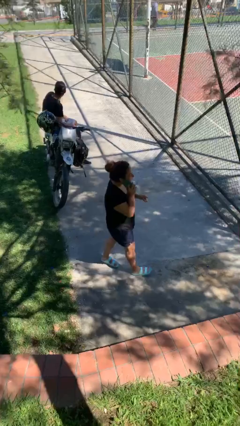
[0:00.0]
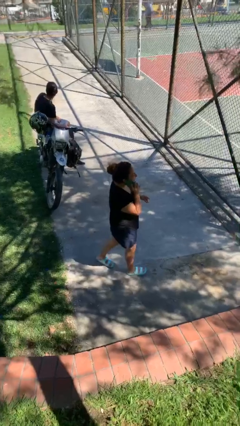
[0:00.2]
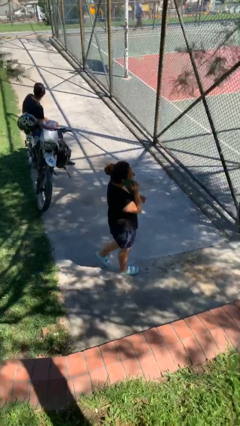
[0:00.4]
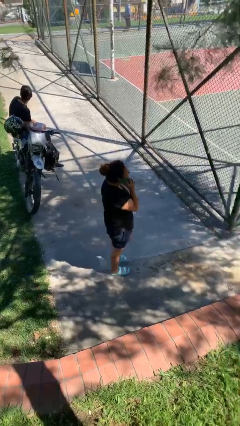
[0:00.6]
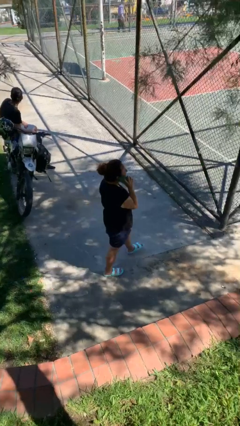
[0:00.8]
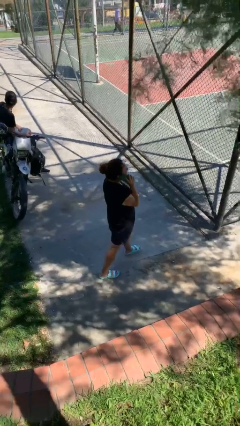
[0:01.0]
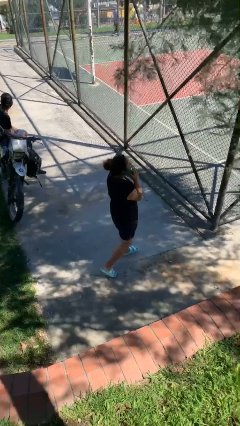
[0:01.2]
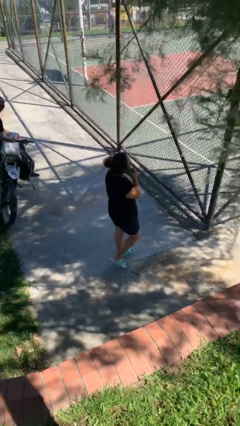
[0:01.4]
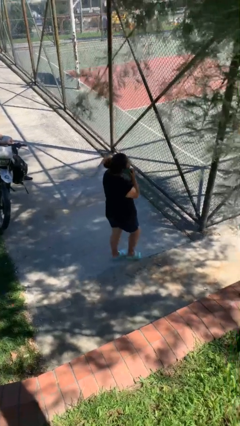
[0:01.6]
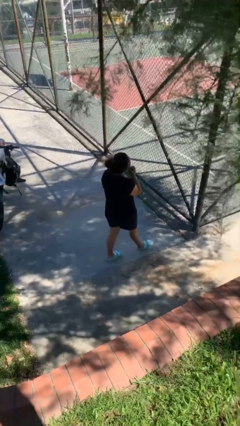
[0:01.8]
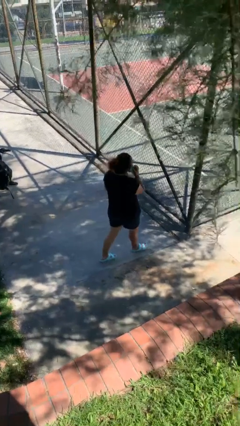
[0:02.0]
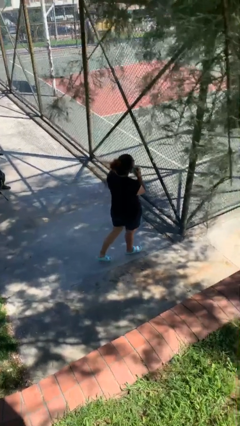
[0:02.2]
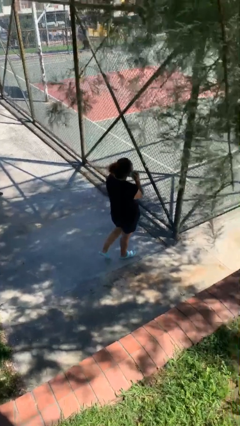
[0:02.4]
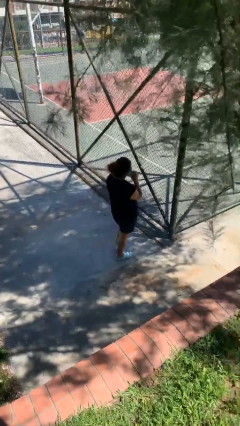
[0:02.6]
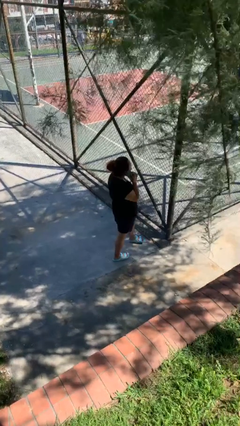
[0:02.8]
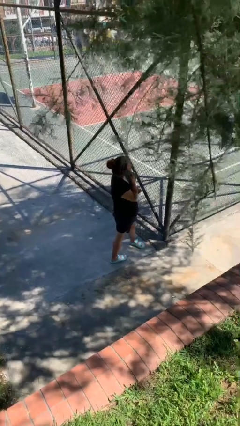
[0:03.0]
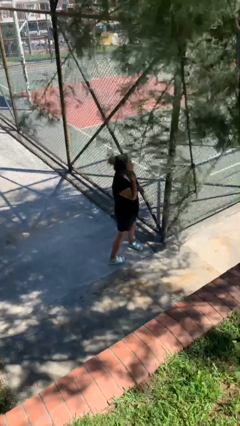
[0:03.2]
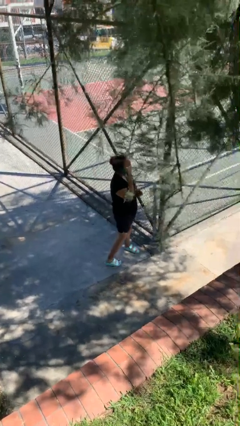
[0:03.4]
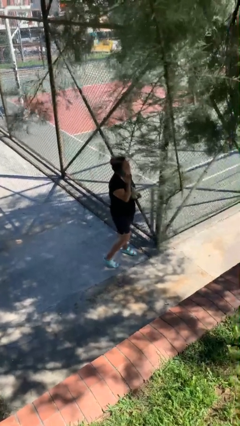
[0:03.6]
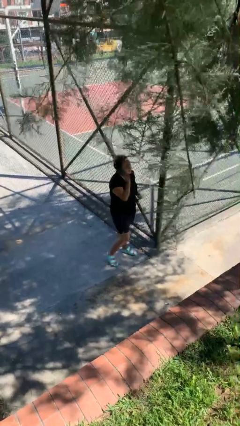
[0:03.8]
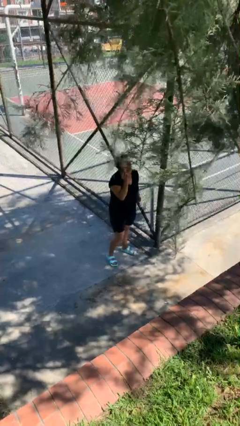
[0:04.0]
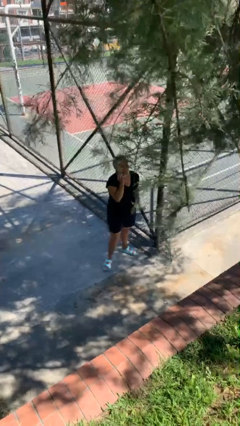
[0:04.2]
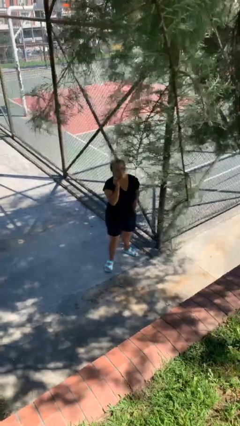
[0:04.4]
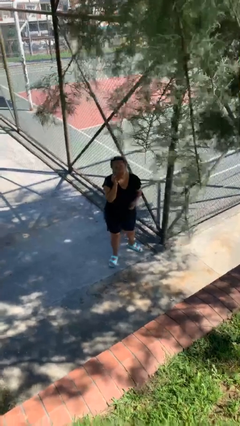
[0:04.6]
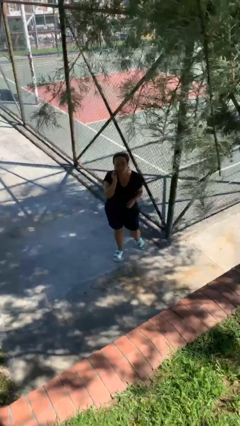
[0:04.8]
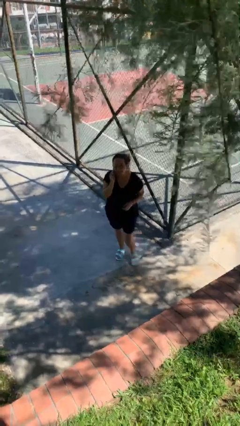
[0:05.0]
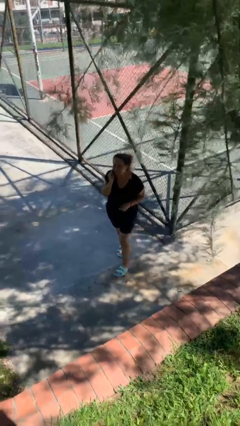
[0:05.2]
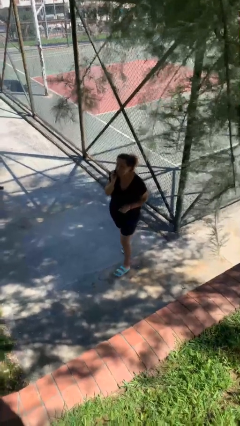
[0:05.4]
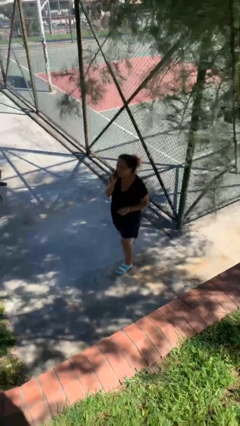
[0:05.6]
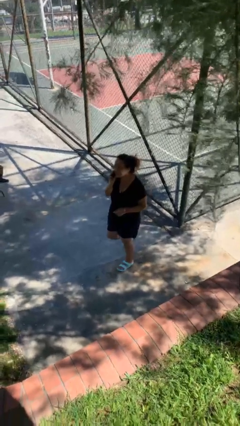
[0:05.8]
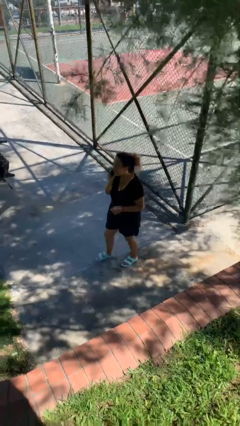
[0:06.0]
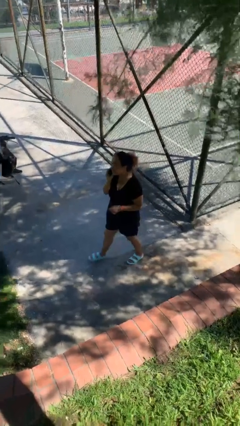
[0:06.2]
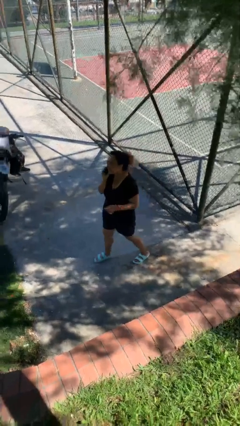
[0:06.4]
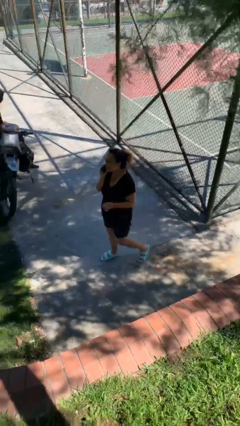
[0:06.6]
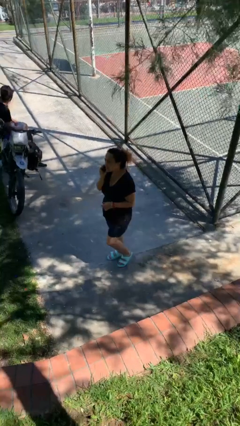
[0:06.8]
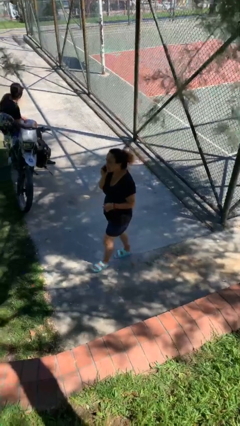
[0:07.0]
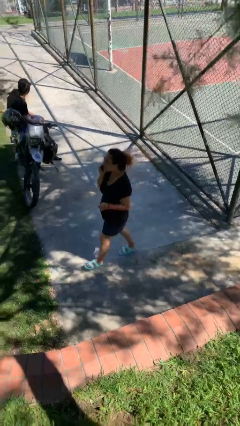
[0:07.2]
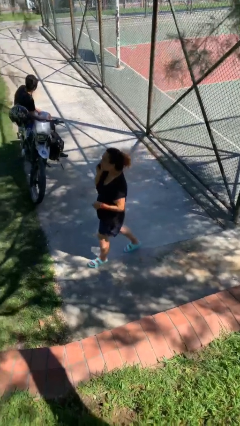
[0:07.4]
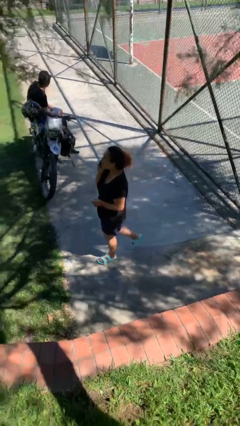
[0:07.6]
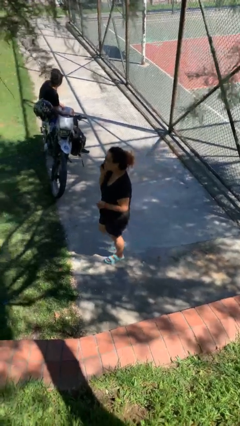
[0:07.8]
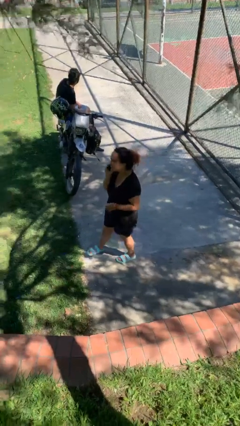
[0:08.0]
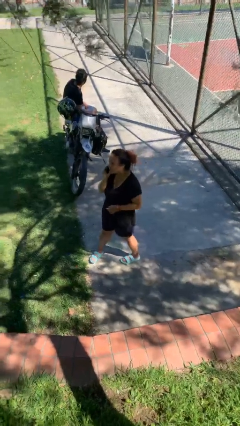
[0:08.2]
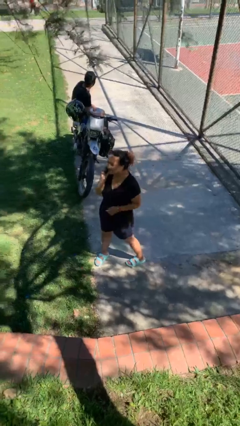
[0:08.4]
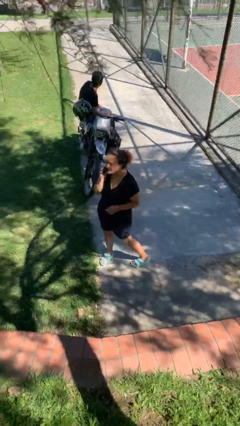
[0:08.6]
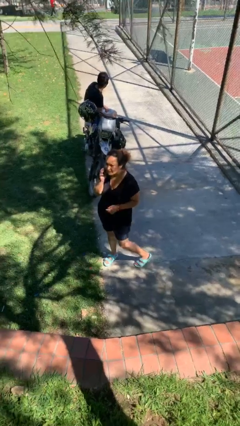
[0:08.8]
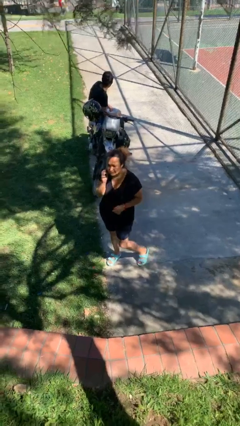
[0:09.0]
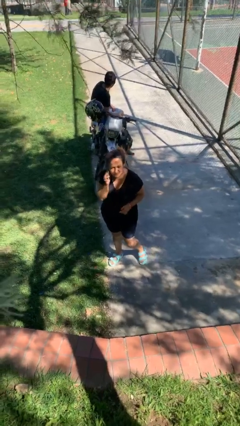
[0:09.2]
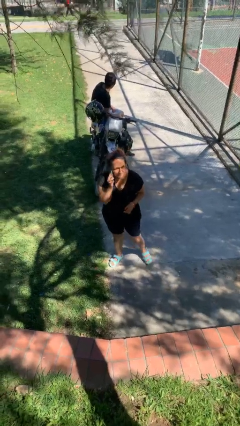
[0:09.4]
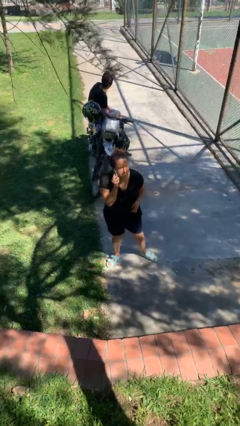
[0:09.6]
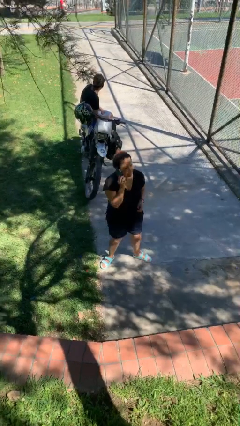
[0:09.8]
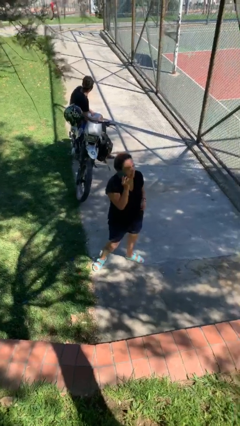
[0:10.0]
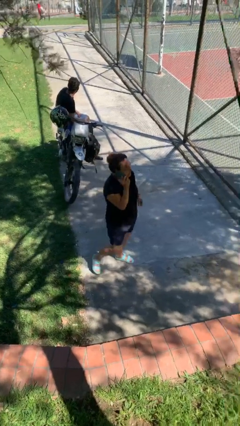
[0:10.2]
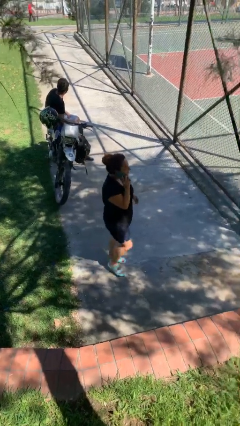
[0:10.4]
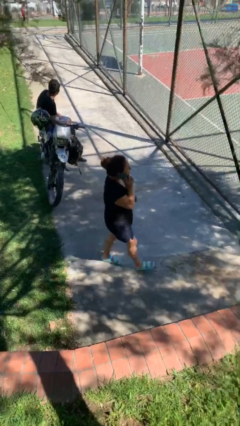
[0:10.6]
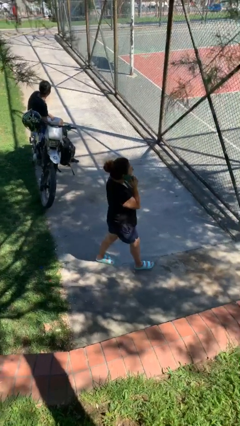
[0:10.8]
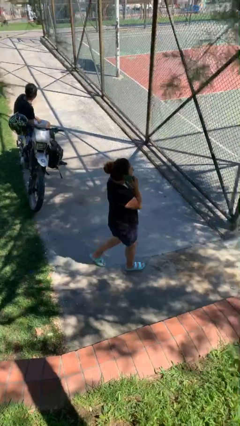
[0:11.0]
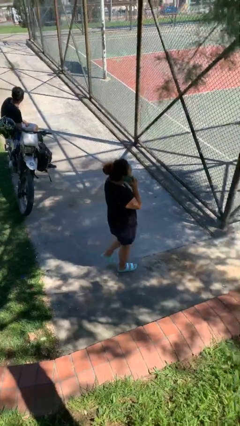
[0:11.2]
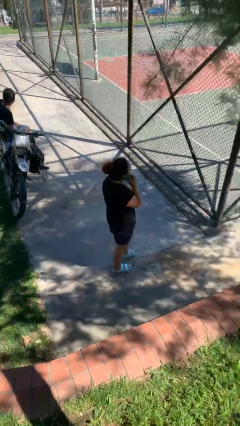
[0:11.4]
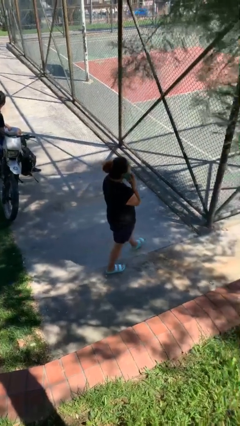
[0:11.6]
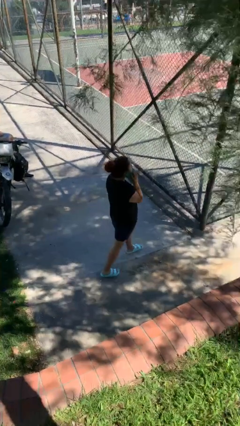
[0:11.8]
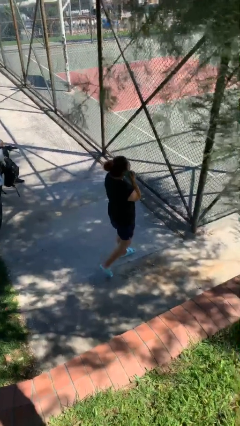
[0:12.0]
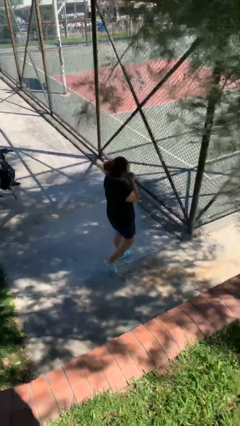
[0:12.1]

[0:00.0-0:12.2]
person talks on phone

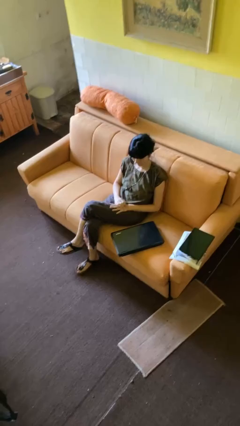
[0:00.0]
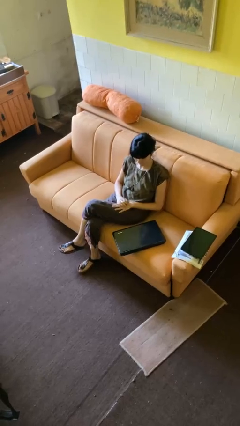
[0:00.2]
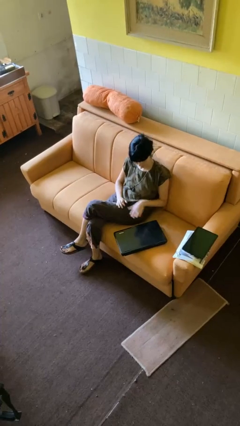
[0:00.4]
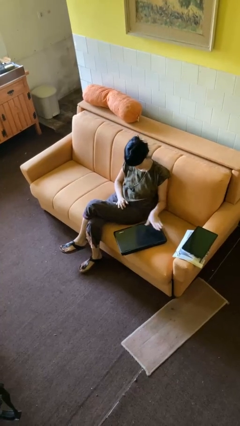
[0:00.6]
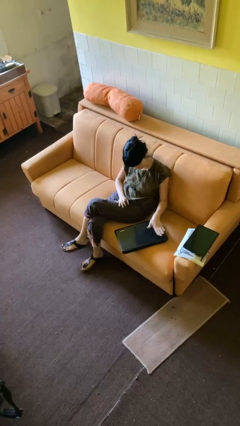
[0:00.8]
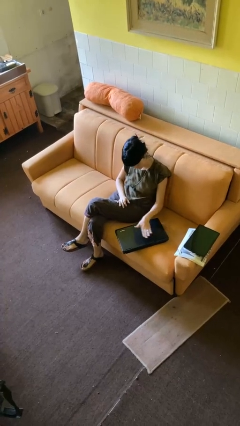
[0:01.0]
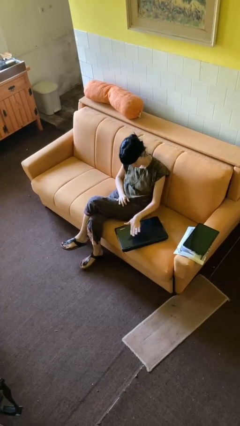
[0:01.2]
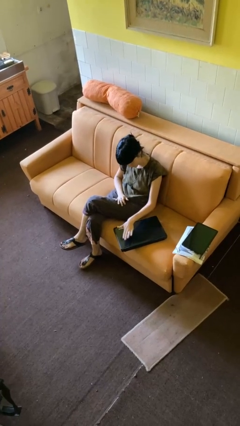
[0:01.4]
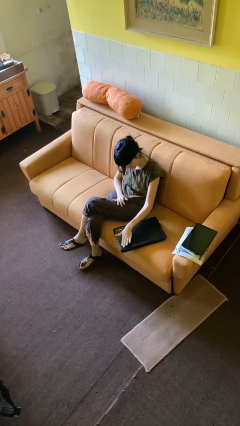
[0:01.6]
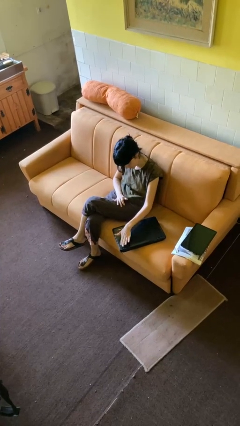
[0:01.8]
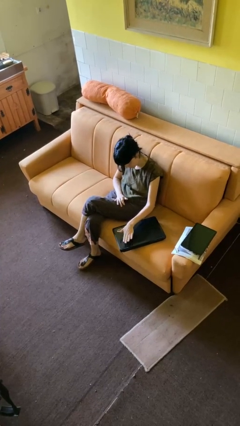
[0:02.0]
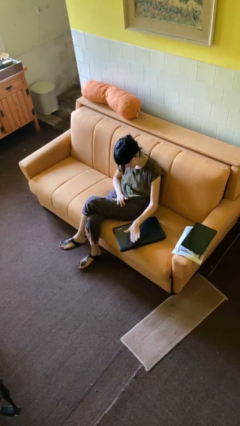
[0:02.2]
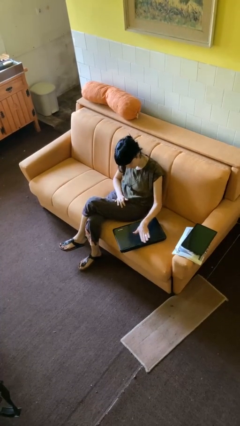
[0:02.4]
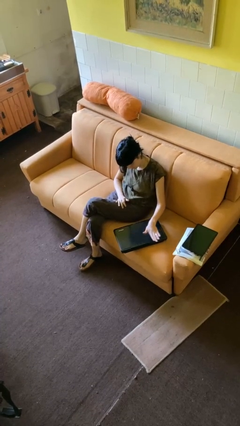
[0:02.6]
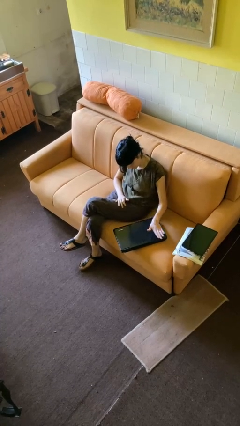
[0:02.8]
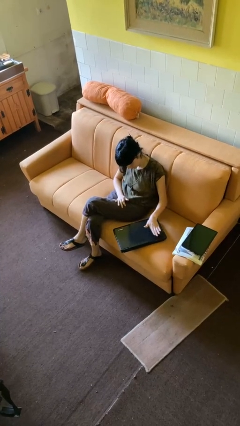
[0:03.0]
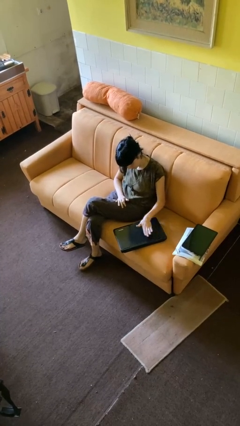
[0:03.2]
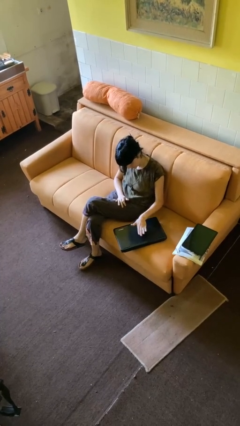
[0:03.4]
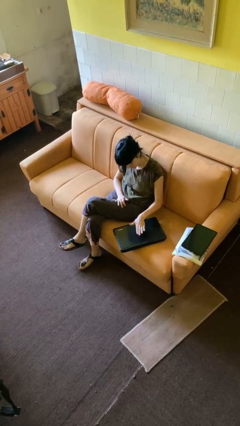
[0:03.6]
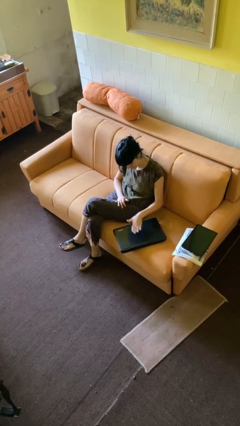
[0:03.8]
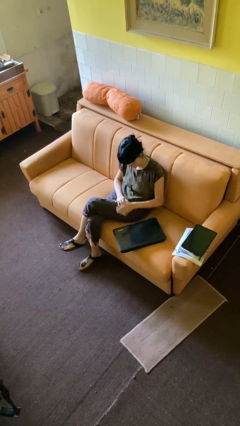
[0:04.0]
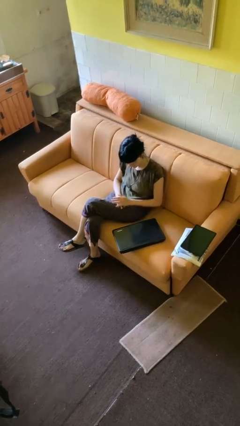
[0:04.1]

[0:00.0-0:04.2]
person waves hand over object

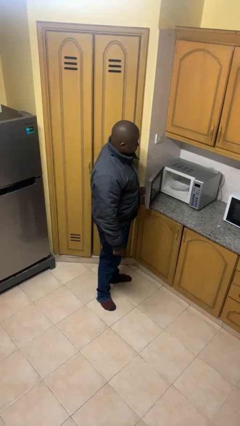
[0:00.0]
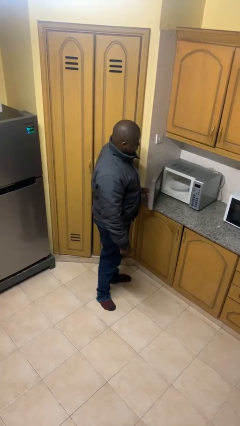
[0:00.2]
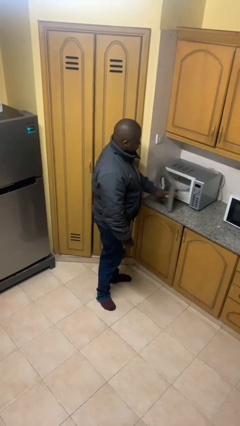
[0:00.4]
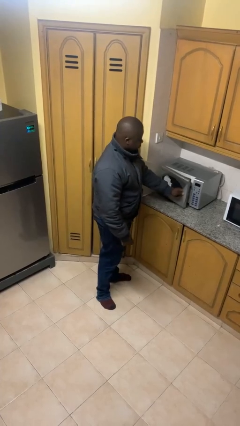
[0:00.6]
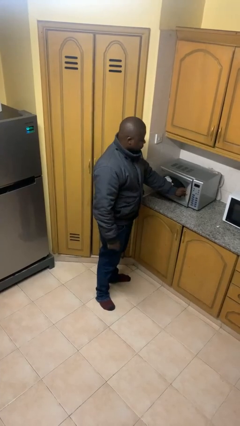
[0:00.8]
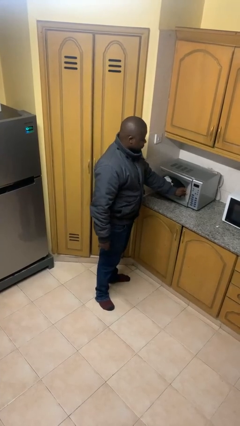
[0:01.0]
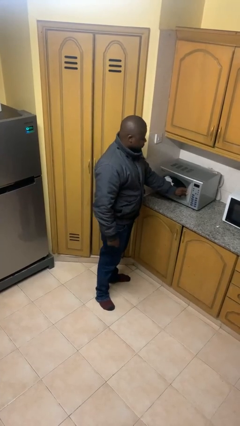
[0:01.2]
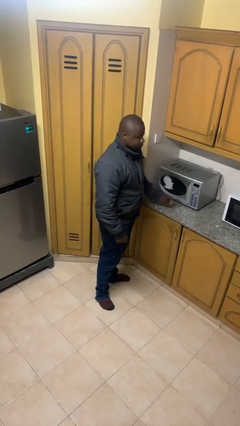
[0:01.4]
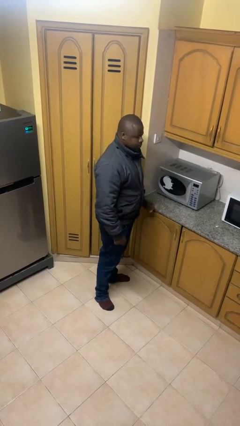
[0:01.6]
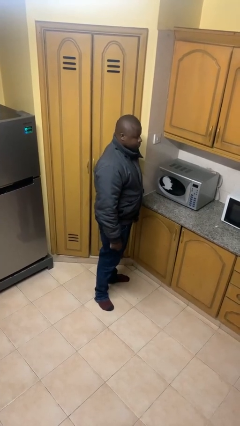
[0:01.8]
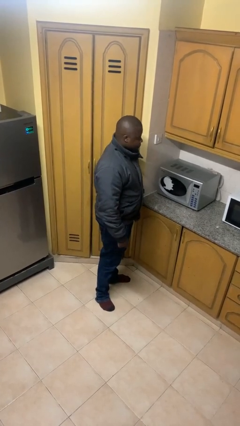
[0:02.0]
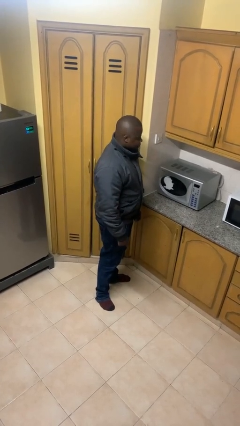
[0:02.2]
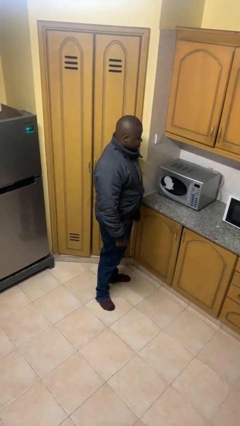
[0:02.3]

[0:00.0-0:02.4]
person closes microwave
